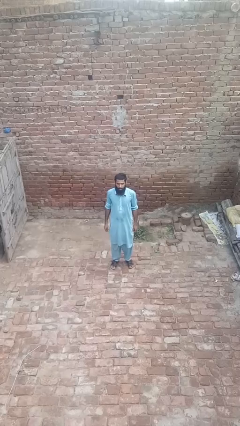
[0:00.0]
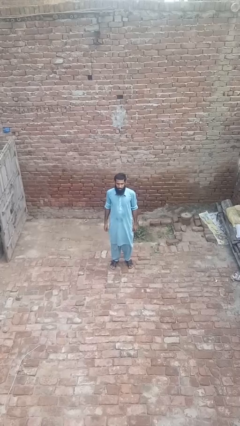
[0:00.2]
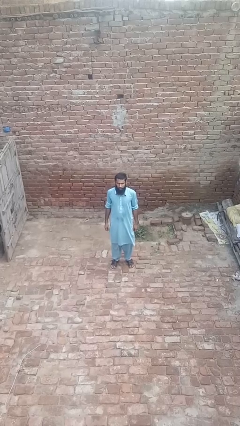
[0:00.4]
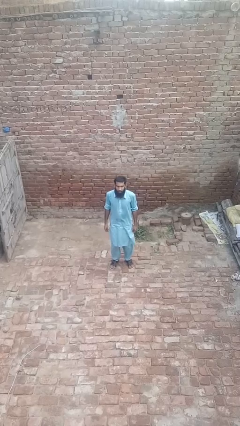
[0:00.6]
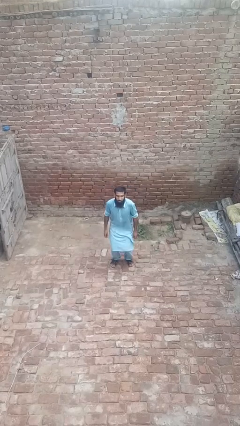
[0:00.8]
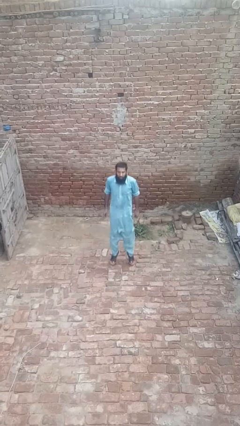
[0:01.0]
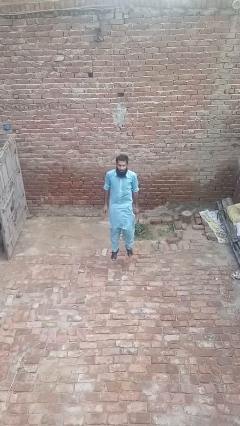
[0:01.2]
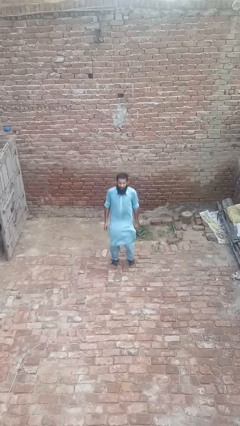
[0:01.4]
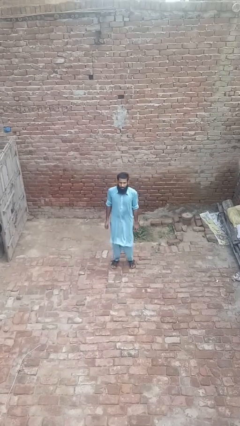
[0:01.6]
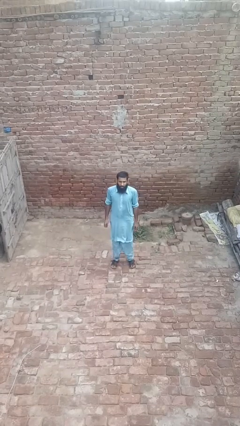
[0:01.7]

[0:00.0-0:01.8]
person jumps

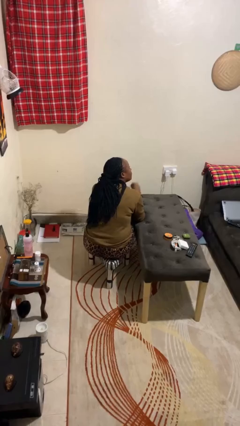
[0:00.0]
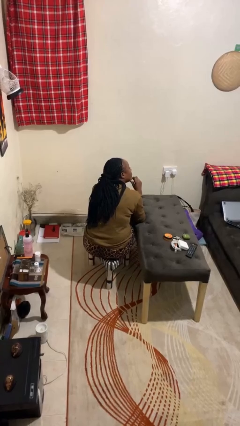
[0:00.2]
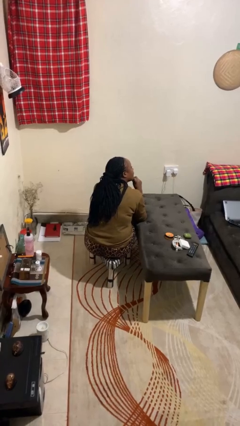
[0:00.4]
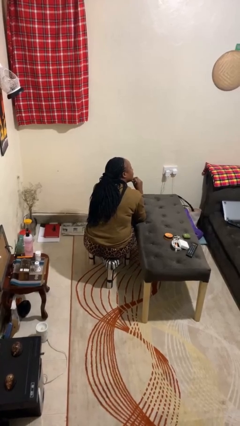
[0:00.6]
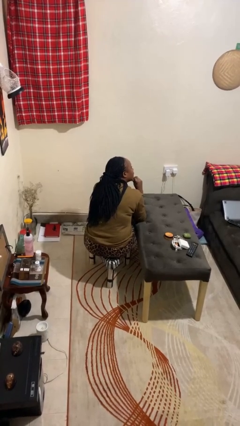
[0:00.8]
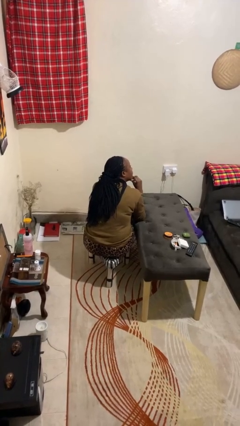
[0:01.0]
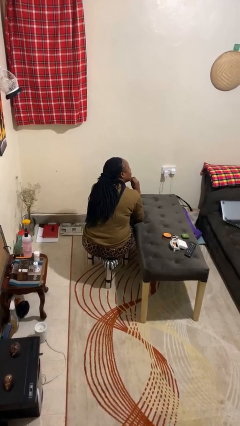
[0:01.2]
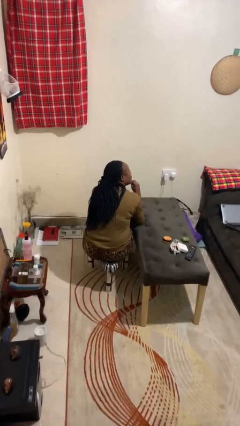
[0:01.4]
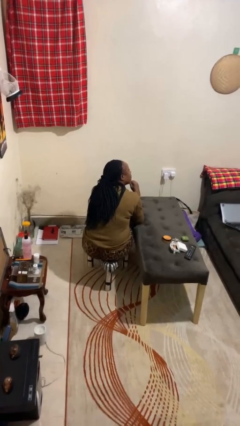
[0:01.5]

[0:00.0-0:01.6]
person strokes chin

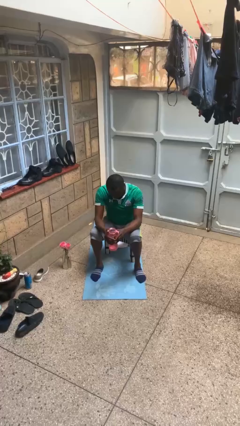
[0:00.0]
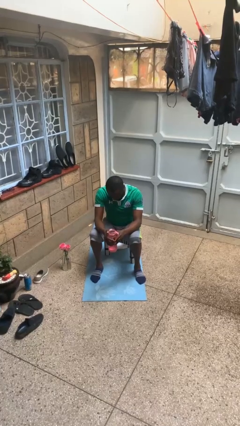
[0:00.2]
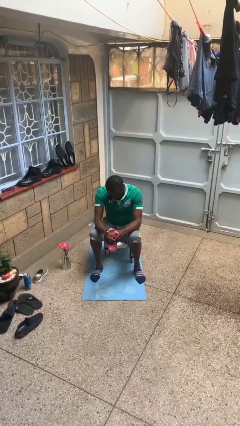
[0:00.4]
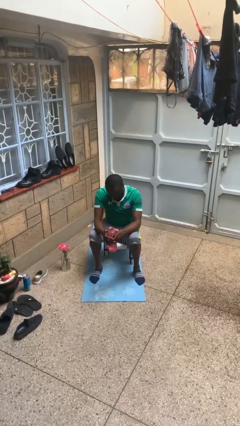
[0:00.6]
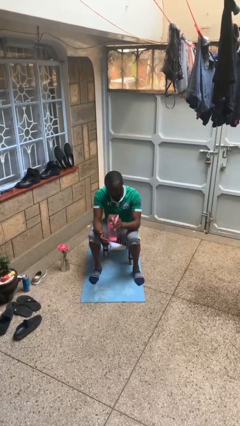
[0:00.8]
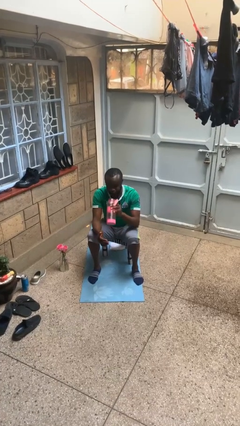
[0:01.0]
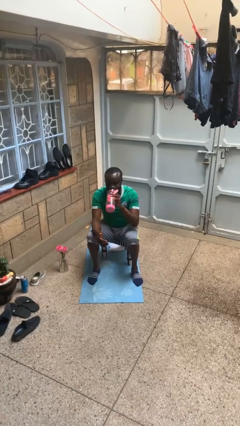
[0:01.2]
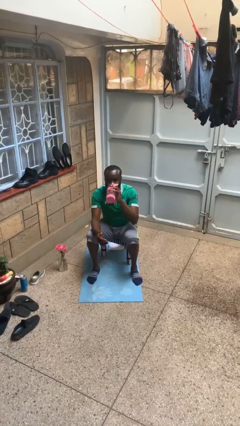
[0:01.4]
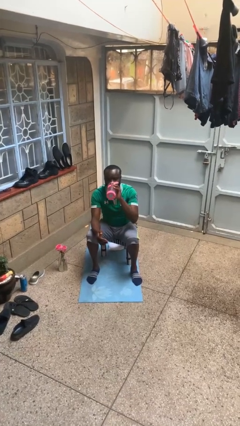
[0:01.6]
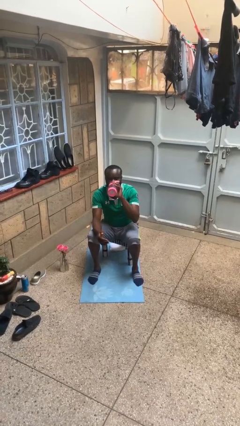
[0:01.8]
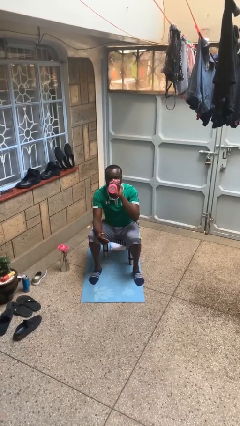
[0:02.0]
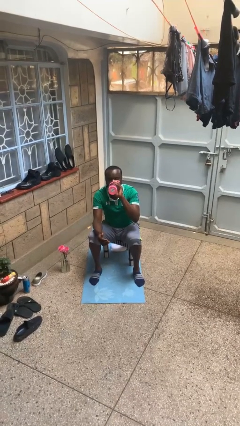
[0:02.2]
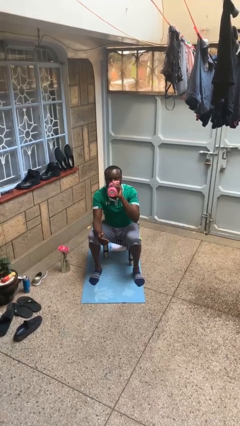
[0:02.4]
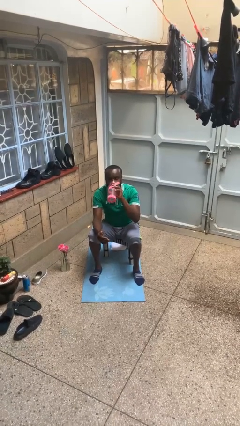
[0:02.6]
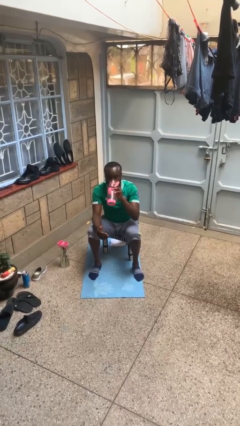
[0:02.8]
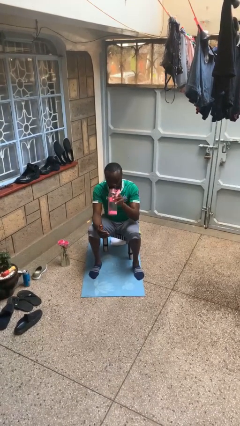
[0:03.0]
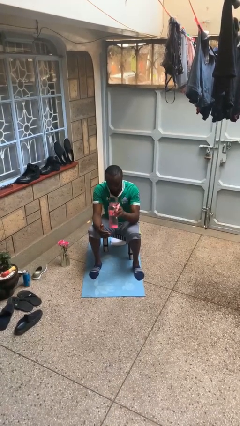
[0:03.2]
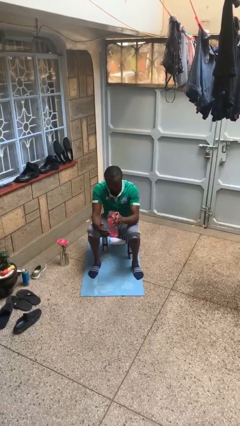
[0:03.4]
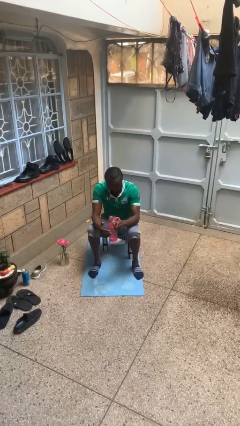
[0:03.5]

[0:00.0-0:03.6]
person drinks from bottle

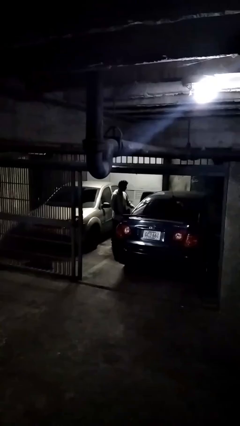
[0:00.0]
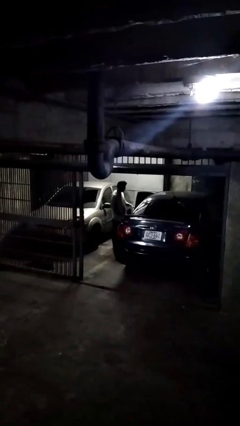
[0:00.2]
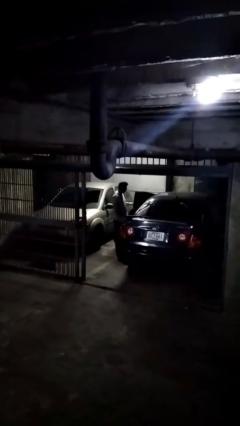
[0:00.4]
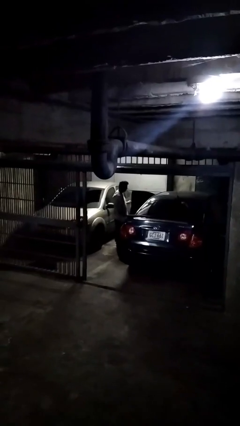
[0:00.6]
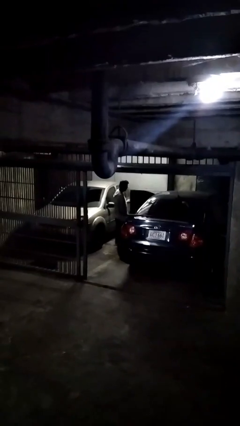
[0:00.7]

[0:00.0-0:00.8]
person opens car door

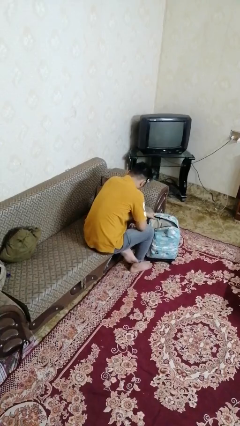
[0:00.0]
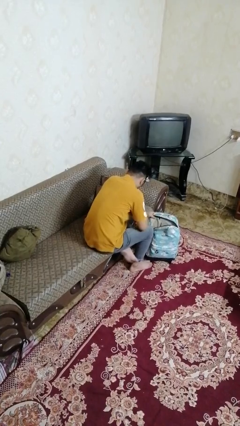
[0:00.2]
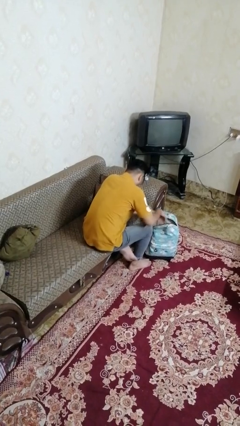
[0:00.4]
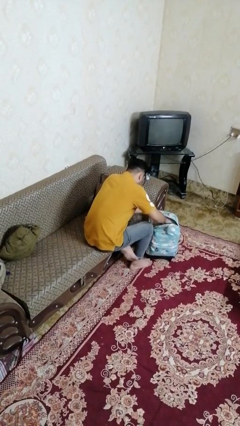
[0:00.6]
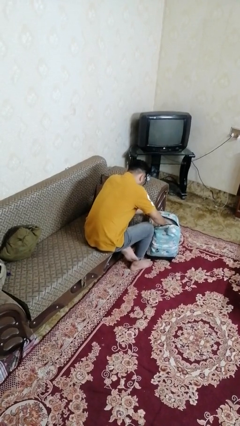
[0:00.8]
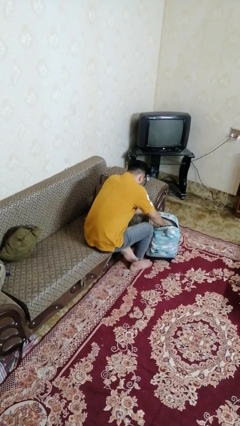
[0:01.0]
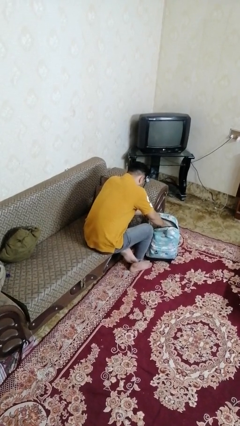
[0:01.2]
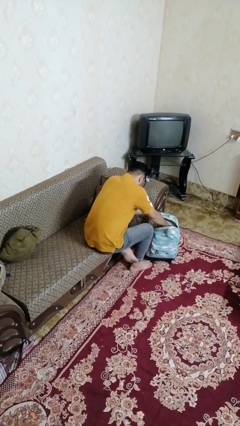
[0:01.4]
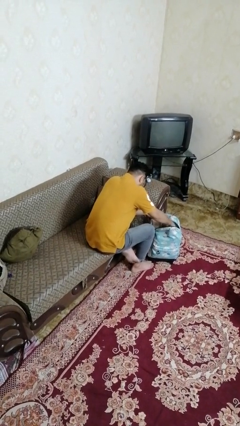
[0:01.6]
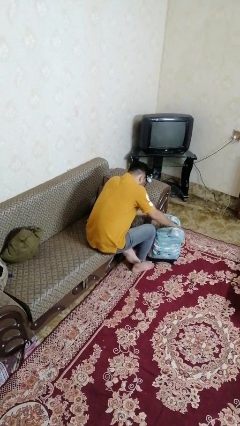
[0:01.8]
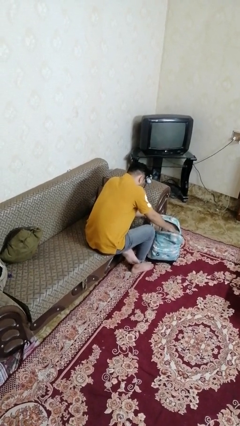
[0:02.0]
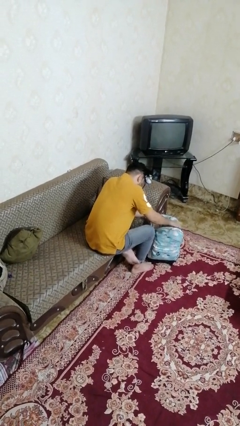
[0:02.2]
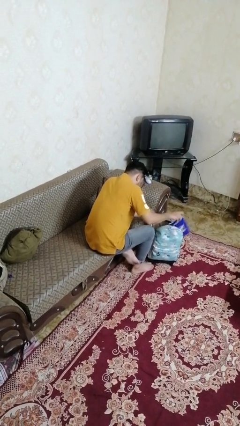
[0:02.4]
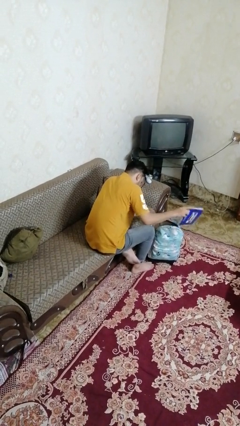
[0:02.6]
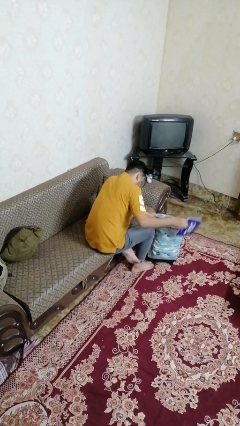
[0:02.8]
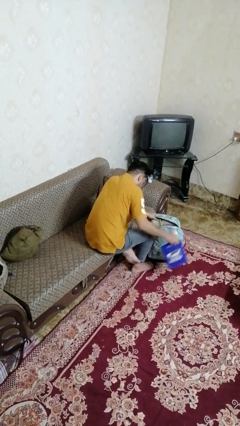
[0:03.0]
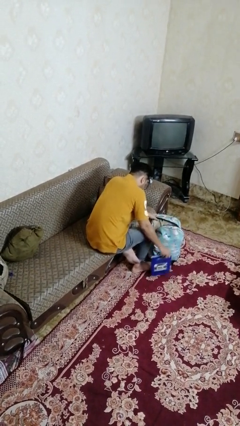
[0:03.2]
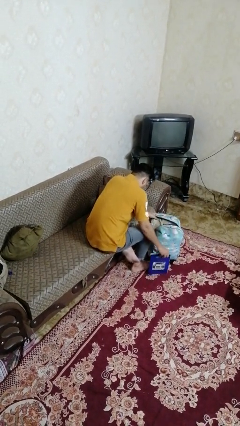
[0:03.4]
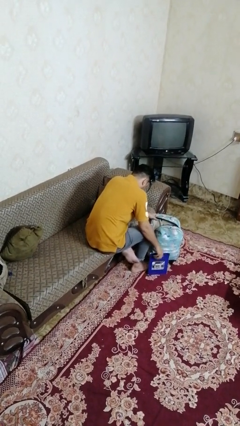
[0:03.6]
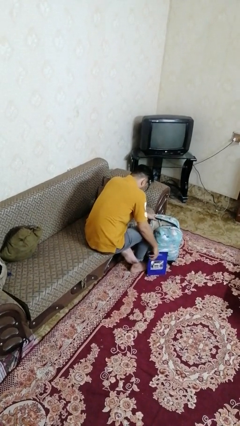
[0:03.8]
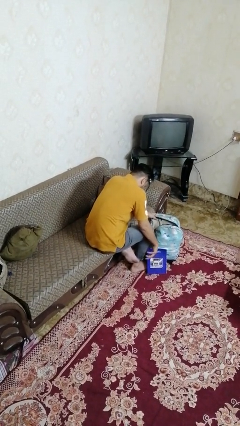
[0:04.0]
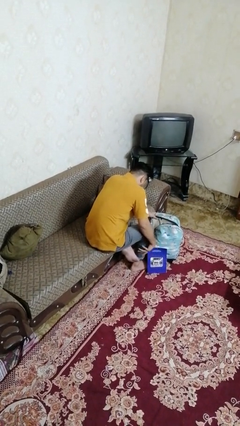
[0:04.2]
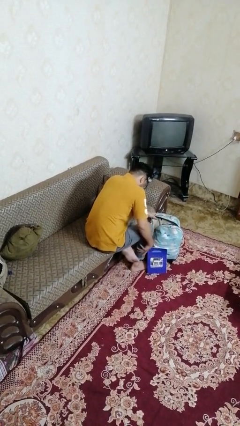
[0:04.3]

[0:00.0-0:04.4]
person takes object from bag

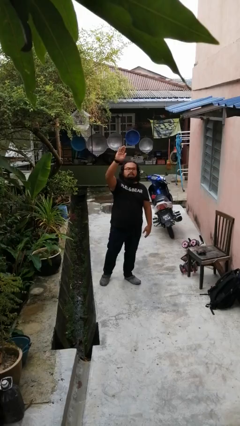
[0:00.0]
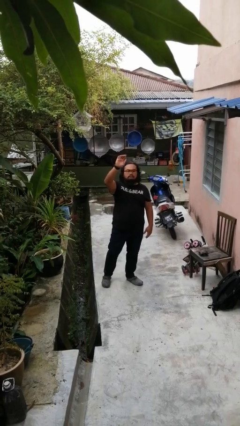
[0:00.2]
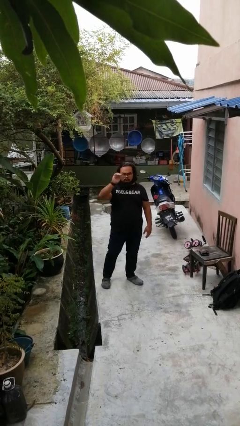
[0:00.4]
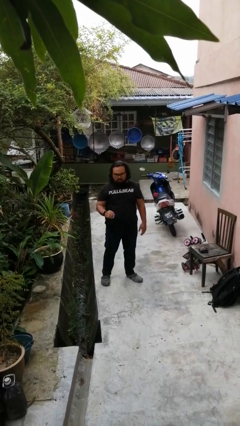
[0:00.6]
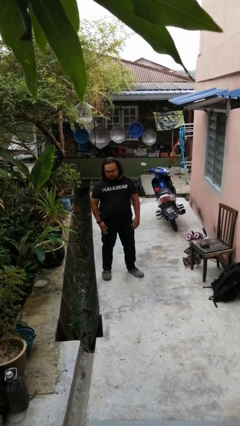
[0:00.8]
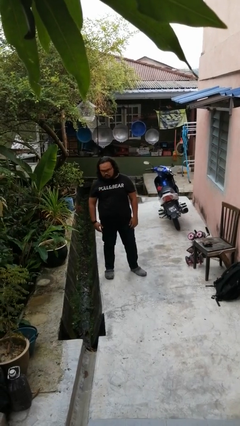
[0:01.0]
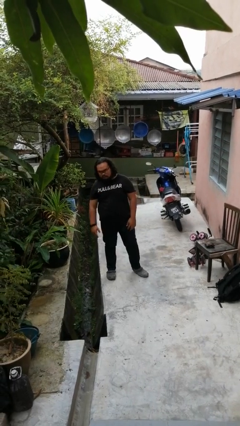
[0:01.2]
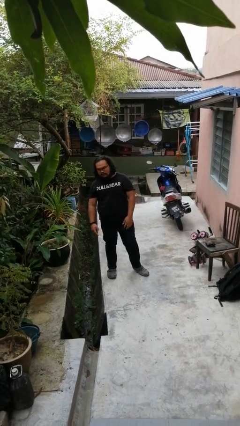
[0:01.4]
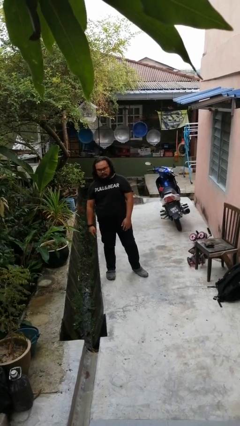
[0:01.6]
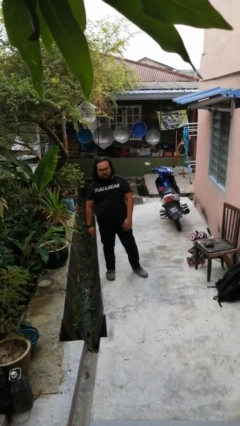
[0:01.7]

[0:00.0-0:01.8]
person gestures lower hand

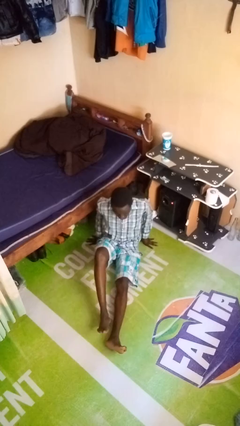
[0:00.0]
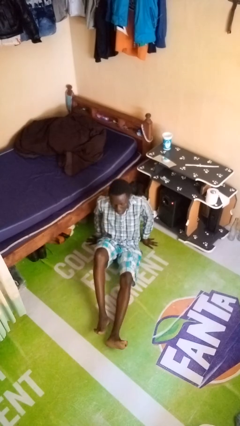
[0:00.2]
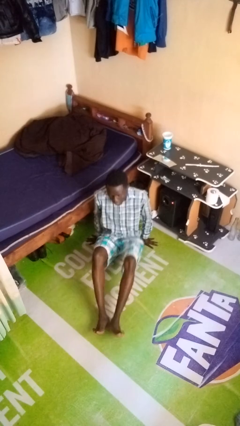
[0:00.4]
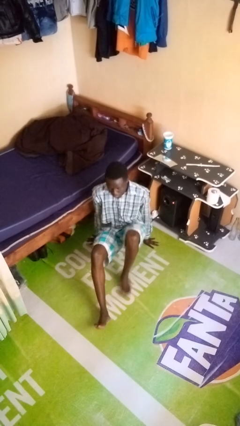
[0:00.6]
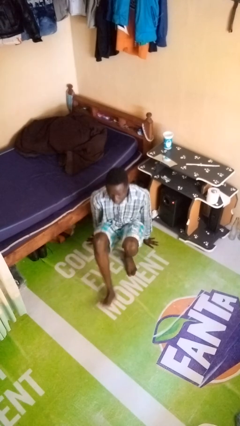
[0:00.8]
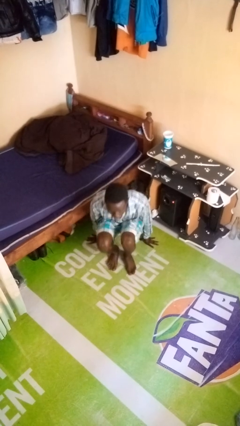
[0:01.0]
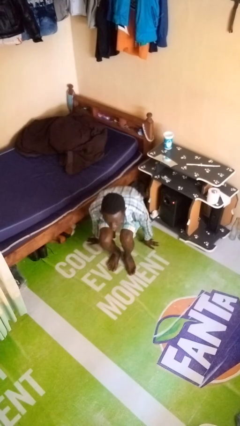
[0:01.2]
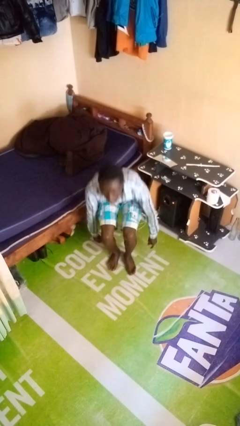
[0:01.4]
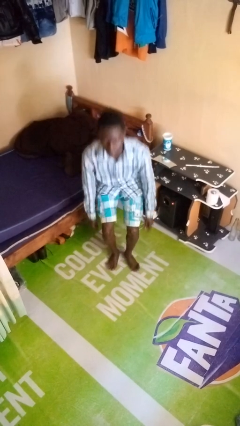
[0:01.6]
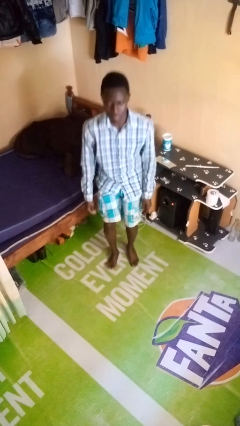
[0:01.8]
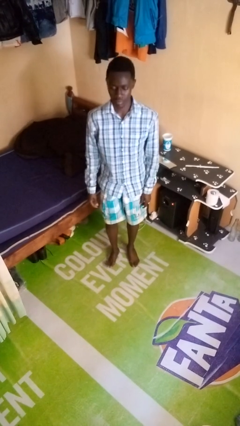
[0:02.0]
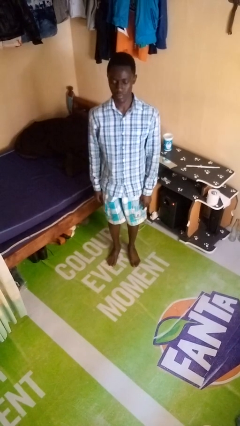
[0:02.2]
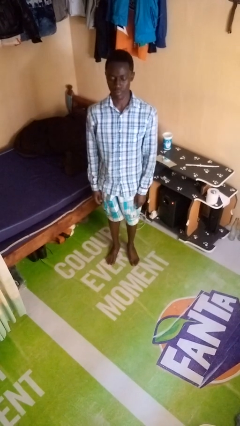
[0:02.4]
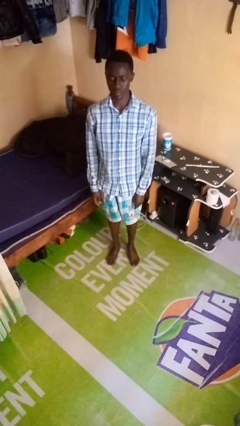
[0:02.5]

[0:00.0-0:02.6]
person stands up from floor

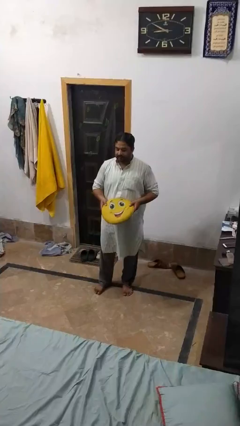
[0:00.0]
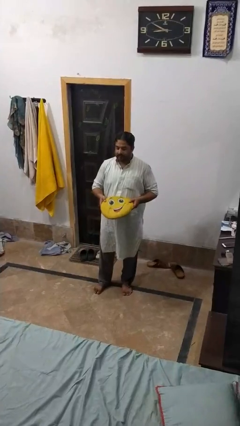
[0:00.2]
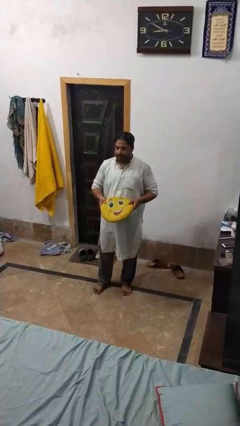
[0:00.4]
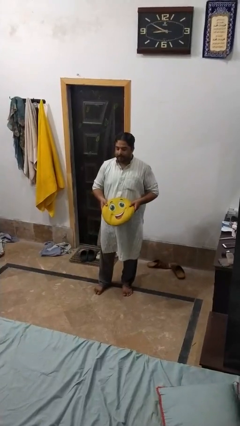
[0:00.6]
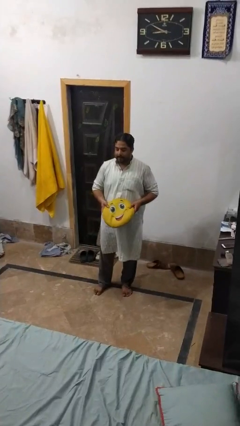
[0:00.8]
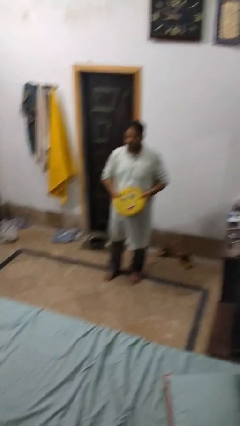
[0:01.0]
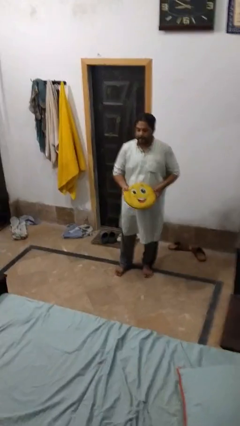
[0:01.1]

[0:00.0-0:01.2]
person picks up object from bed
